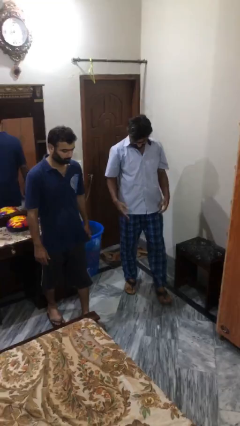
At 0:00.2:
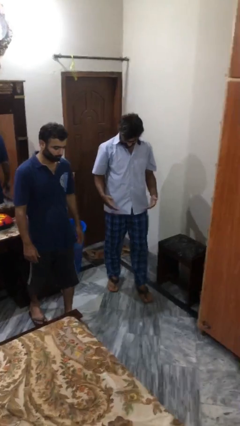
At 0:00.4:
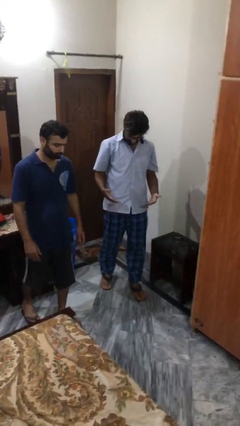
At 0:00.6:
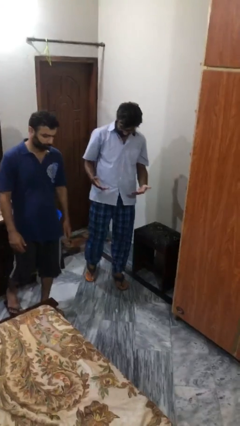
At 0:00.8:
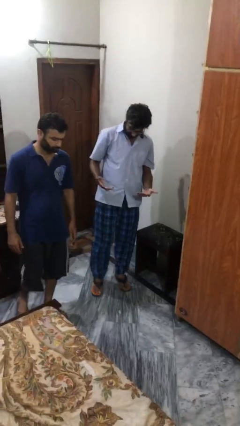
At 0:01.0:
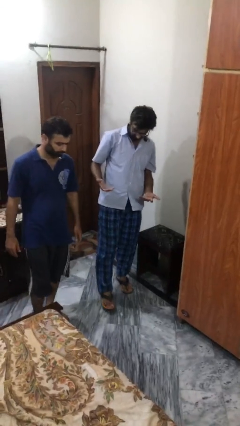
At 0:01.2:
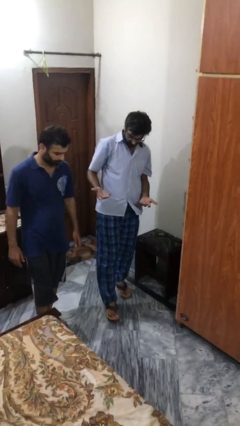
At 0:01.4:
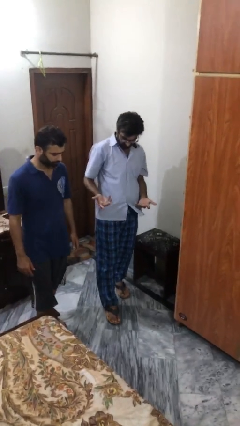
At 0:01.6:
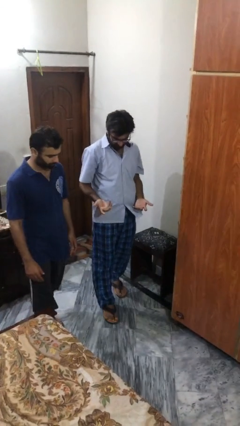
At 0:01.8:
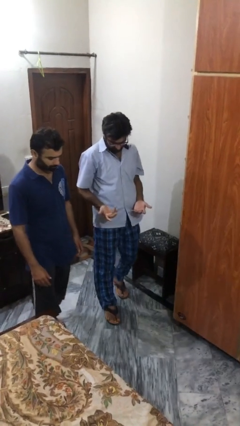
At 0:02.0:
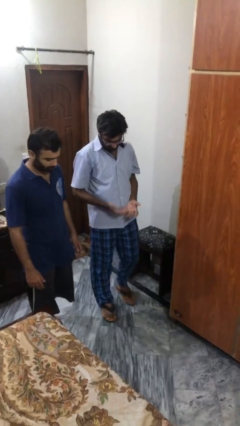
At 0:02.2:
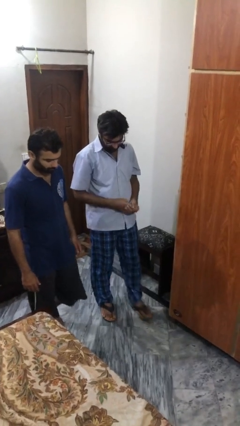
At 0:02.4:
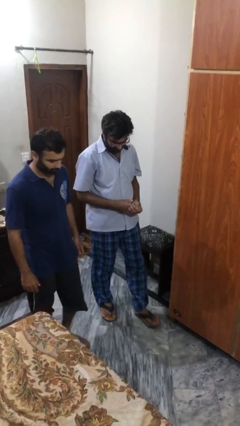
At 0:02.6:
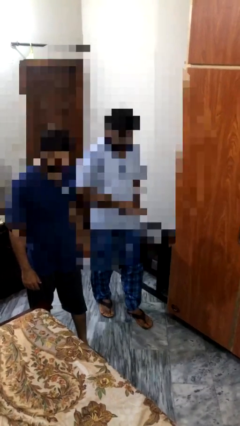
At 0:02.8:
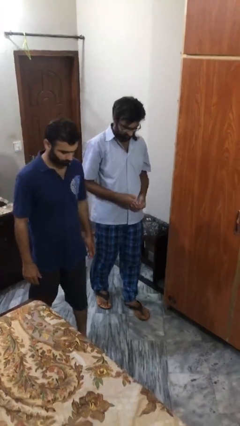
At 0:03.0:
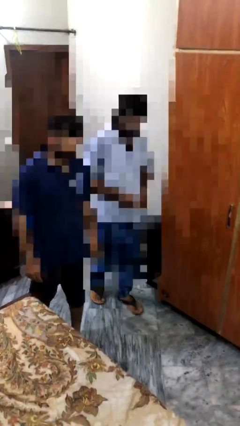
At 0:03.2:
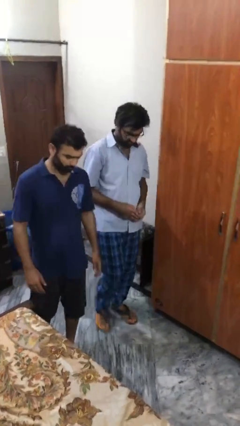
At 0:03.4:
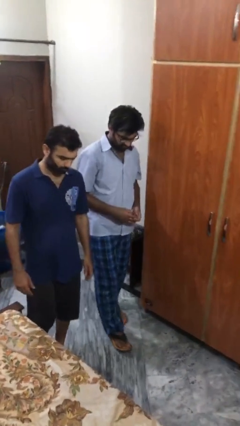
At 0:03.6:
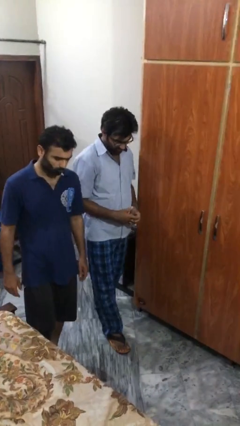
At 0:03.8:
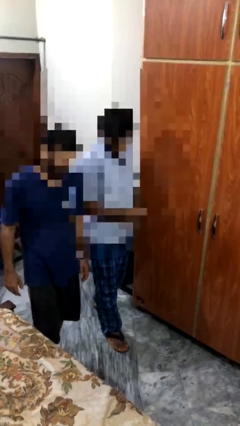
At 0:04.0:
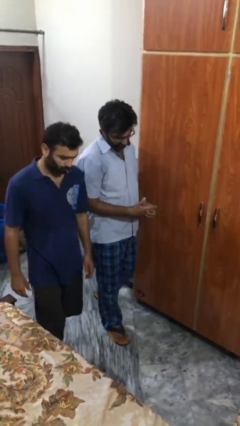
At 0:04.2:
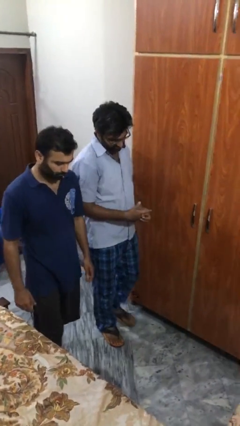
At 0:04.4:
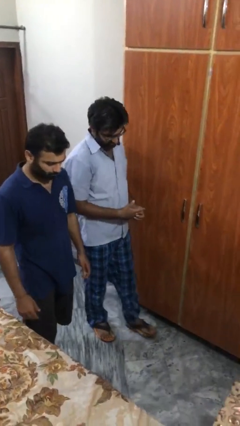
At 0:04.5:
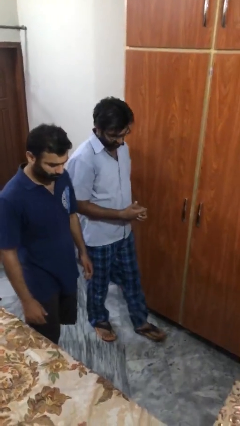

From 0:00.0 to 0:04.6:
person talks to person

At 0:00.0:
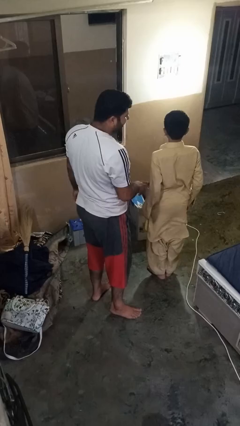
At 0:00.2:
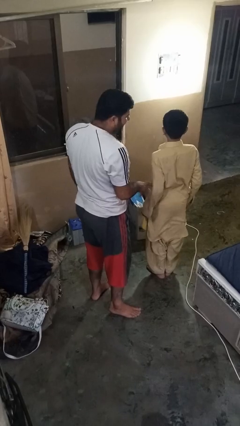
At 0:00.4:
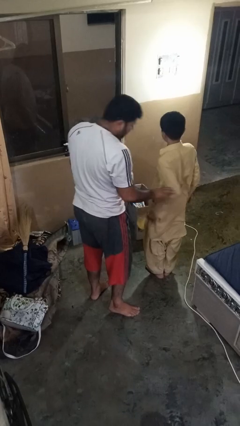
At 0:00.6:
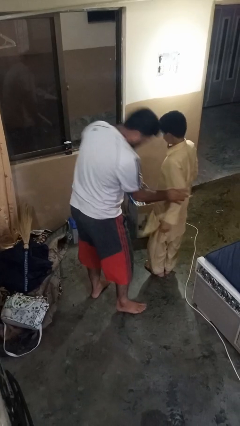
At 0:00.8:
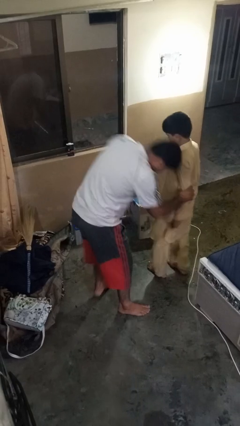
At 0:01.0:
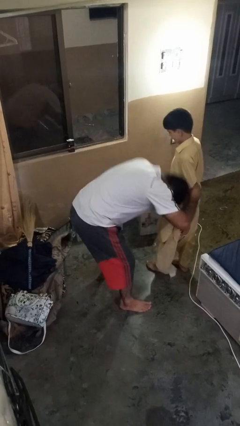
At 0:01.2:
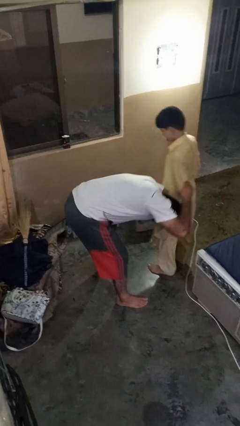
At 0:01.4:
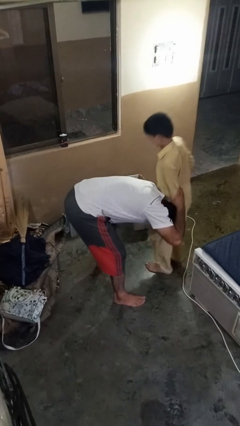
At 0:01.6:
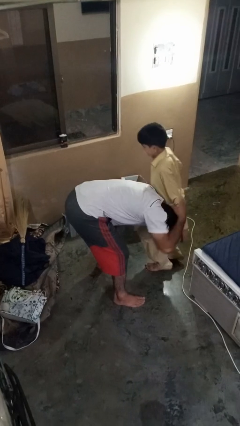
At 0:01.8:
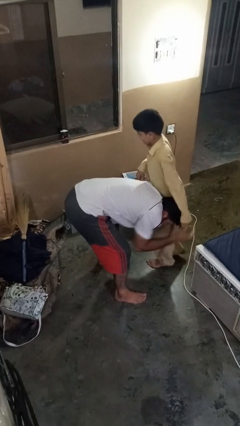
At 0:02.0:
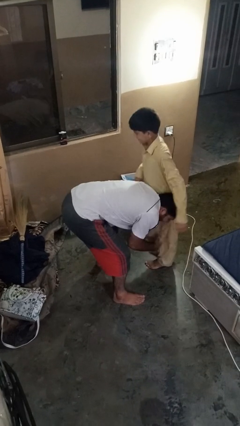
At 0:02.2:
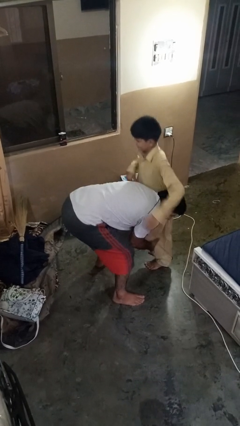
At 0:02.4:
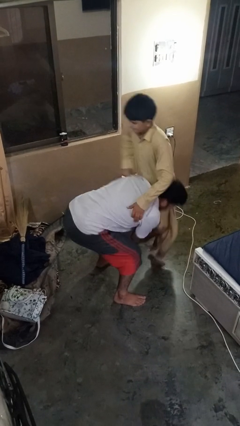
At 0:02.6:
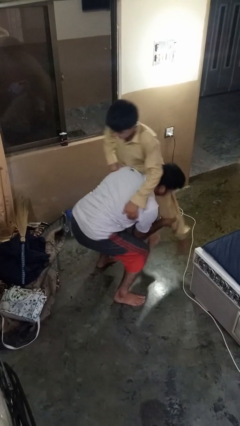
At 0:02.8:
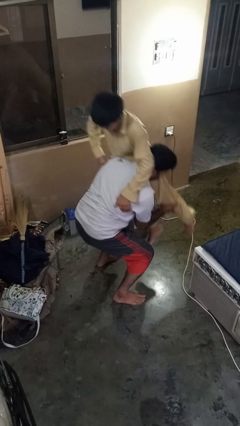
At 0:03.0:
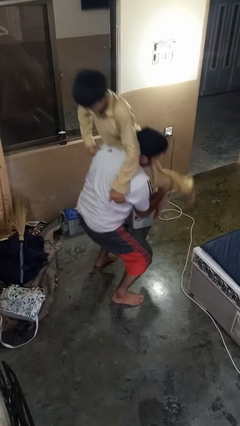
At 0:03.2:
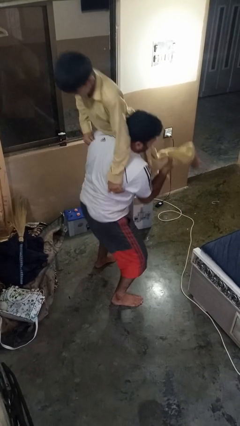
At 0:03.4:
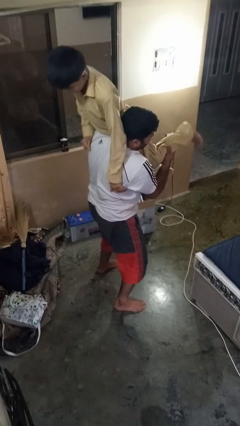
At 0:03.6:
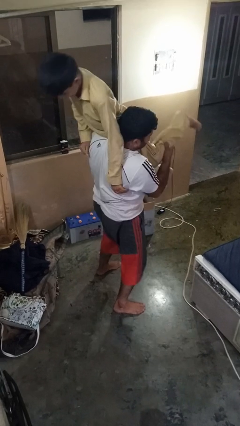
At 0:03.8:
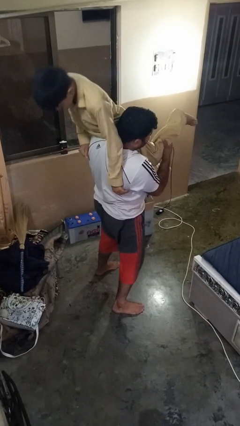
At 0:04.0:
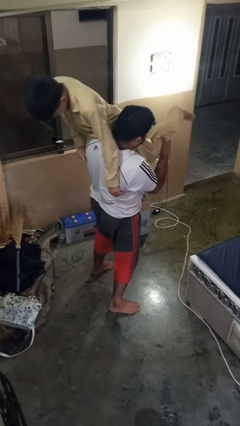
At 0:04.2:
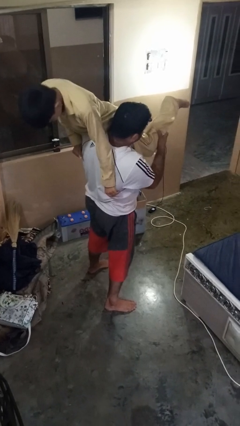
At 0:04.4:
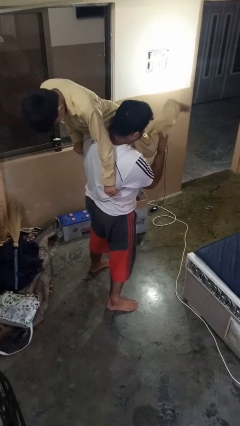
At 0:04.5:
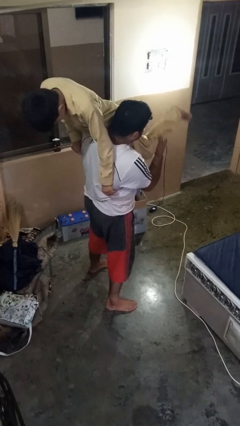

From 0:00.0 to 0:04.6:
person carries person over shoulder

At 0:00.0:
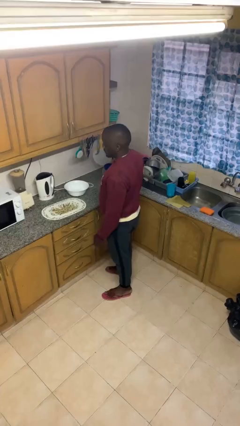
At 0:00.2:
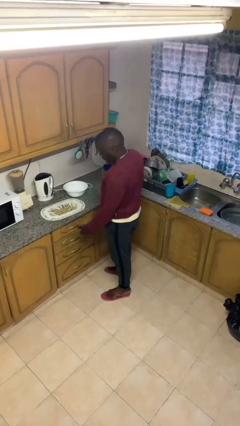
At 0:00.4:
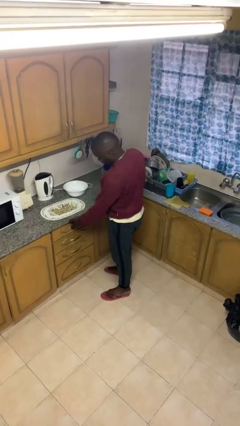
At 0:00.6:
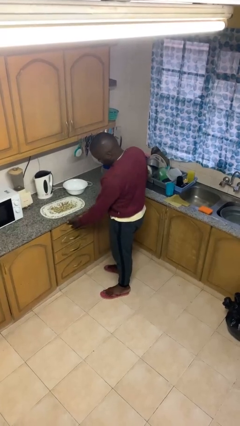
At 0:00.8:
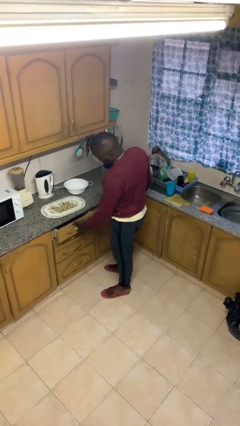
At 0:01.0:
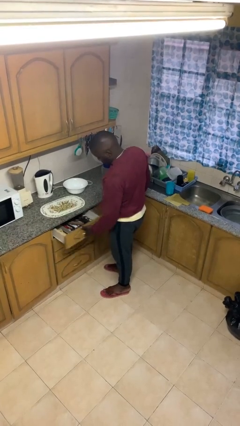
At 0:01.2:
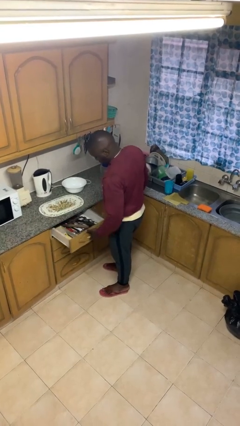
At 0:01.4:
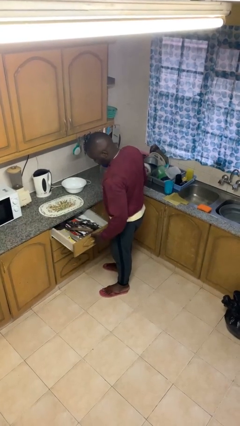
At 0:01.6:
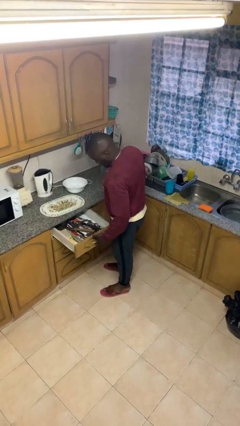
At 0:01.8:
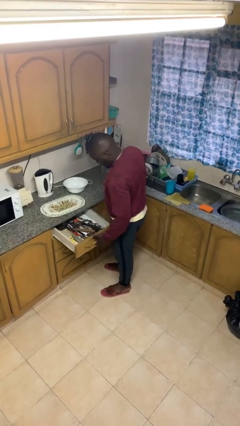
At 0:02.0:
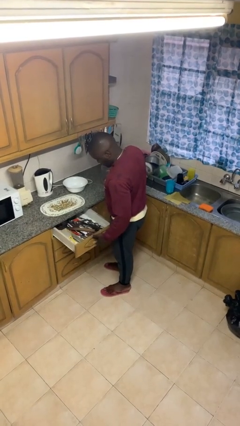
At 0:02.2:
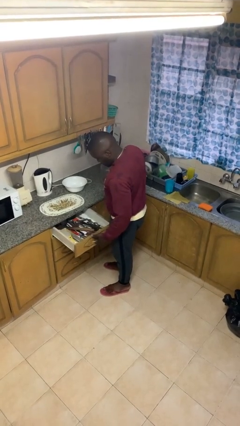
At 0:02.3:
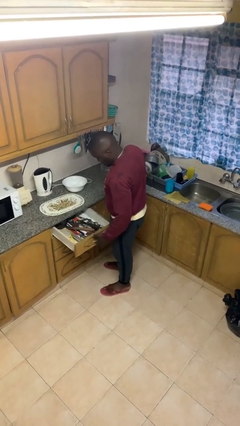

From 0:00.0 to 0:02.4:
person opens kitchen drawer

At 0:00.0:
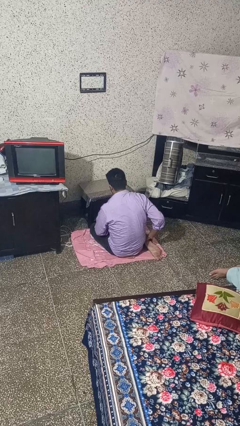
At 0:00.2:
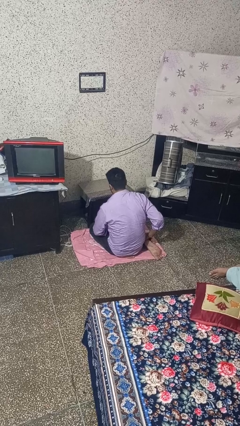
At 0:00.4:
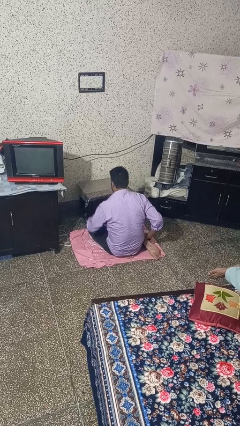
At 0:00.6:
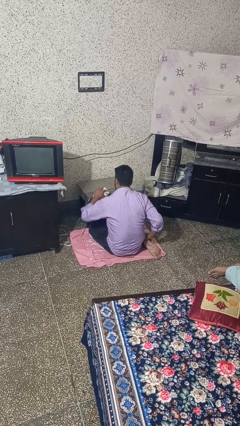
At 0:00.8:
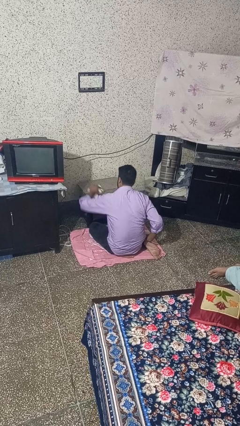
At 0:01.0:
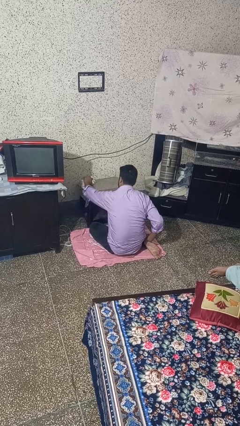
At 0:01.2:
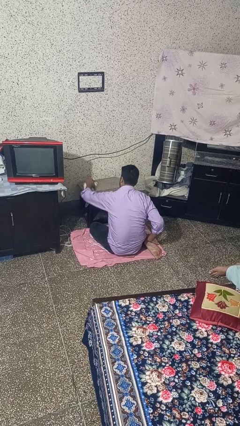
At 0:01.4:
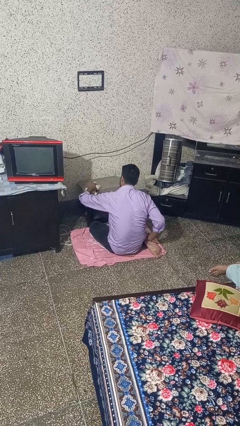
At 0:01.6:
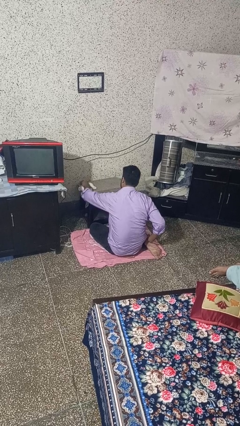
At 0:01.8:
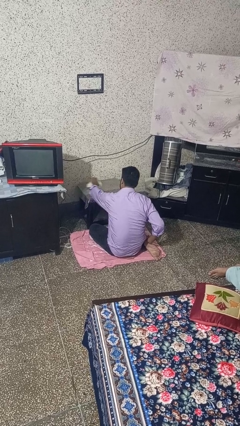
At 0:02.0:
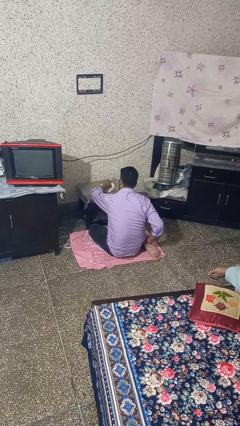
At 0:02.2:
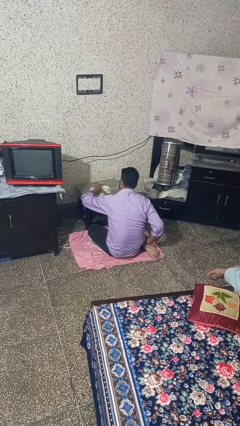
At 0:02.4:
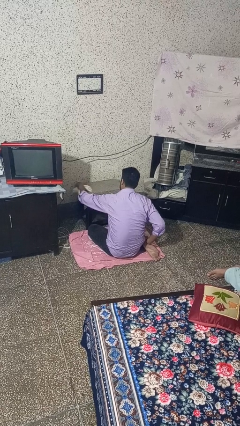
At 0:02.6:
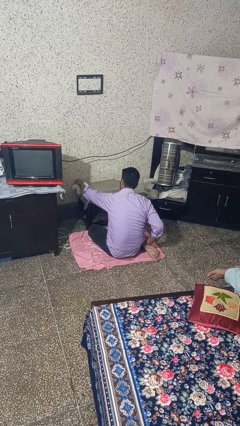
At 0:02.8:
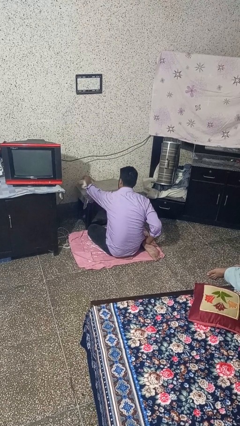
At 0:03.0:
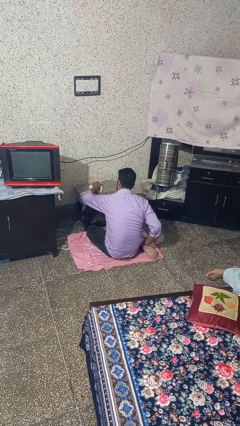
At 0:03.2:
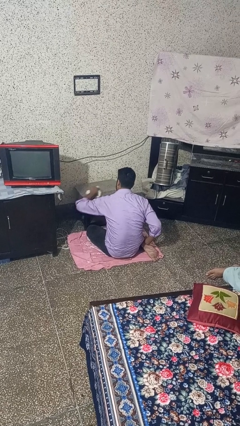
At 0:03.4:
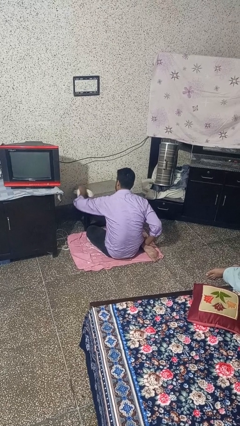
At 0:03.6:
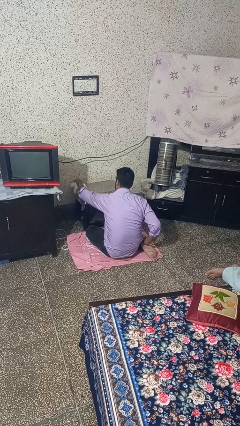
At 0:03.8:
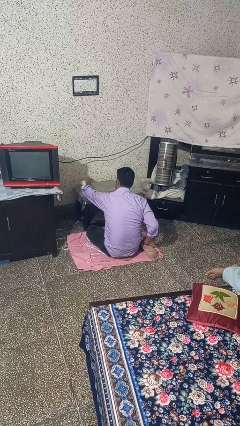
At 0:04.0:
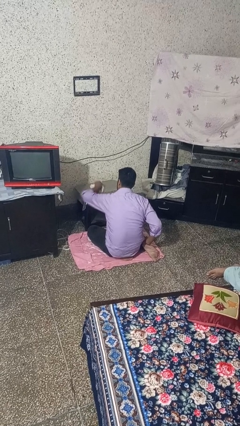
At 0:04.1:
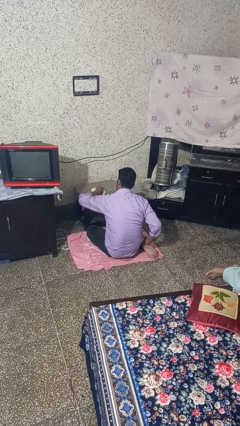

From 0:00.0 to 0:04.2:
person cleans table with rag

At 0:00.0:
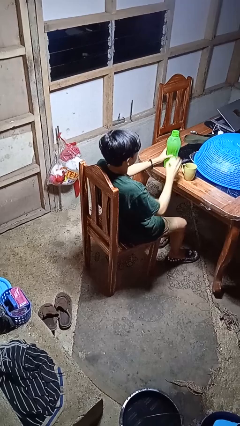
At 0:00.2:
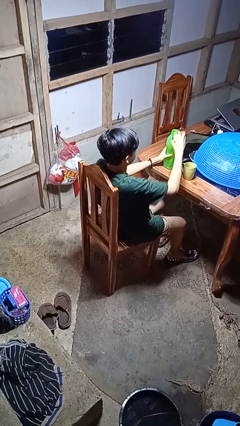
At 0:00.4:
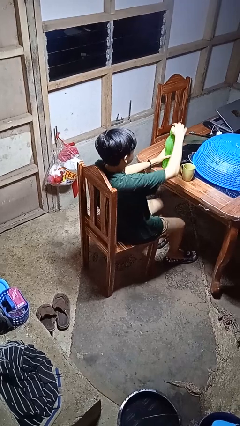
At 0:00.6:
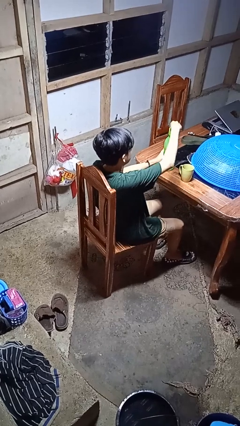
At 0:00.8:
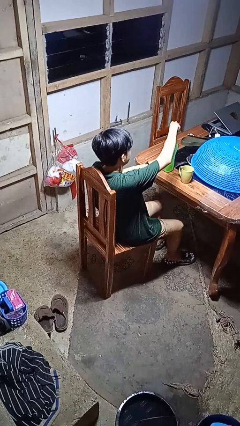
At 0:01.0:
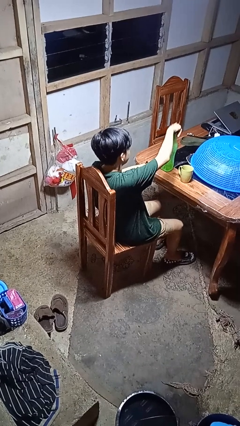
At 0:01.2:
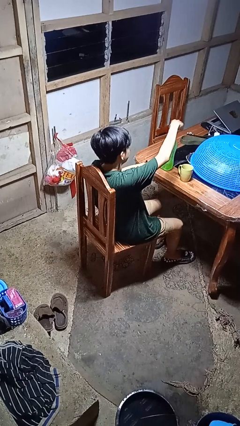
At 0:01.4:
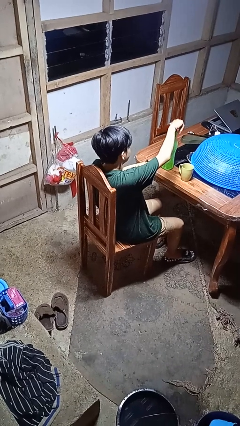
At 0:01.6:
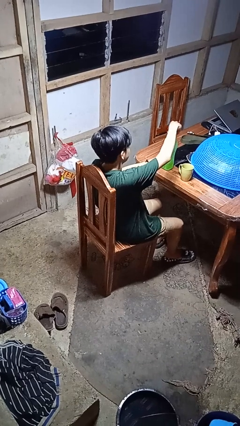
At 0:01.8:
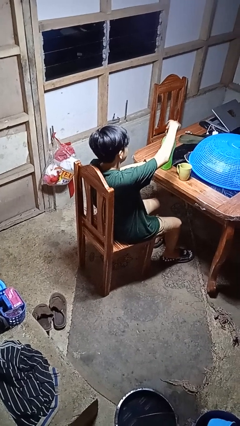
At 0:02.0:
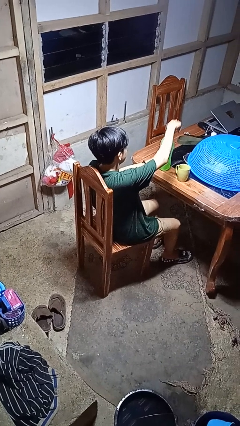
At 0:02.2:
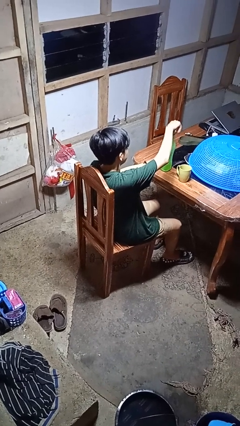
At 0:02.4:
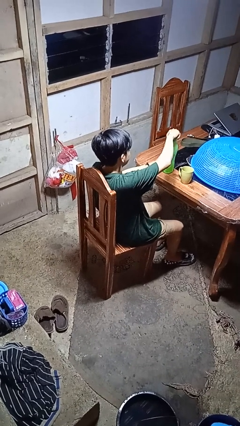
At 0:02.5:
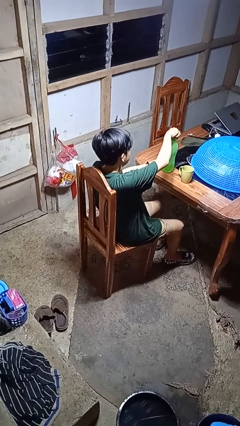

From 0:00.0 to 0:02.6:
person screws lid to bottle
